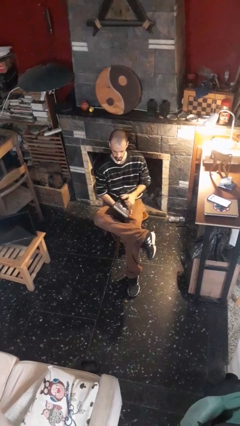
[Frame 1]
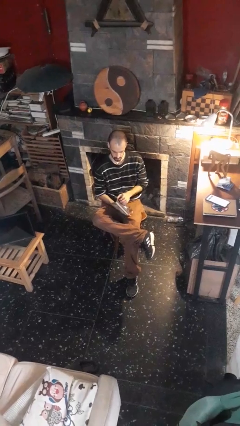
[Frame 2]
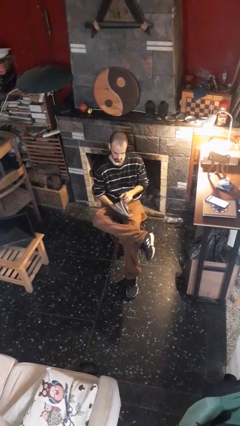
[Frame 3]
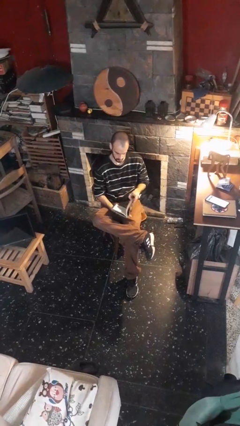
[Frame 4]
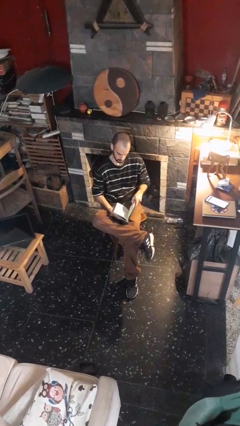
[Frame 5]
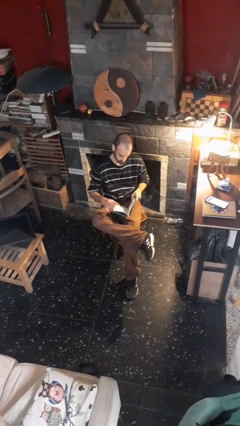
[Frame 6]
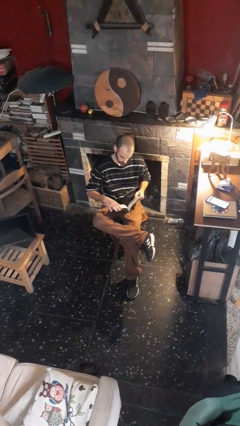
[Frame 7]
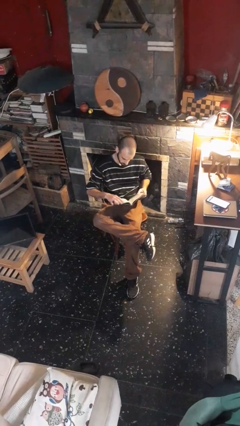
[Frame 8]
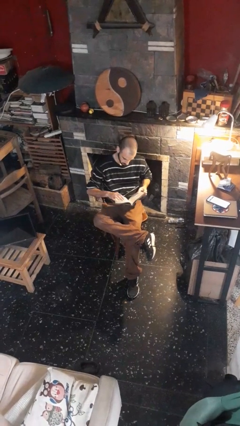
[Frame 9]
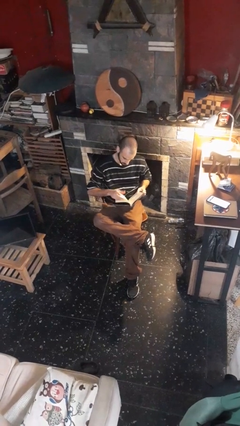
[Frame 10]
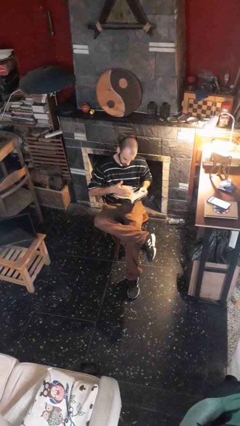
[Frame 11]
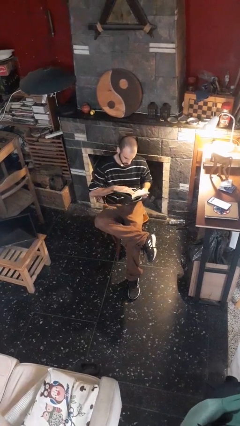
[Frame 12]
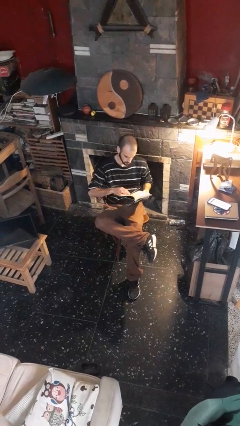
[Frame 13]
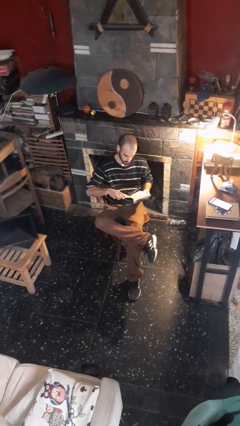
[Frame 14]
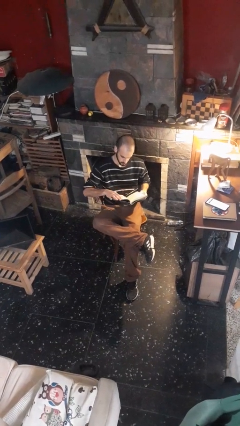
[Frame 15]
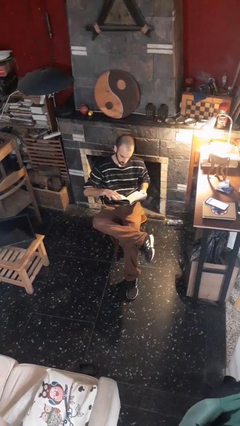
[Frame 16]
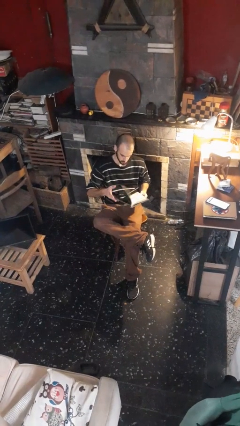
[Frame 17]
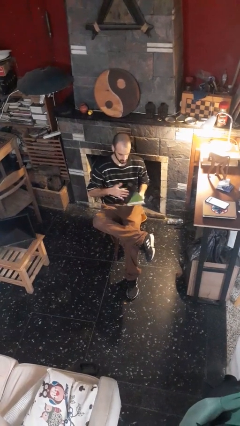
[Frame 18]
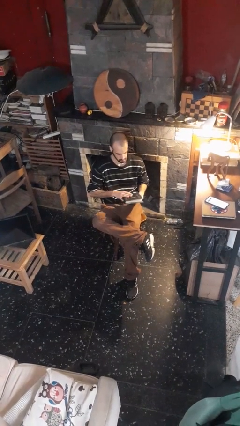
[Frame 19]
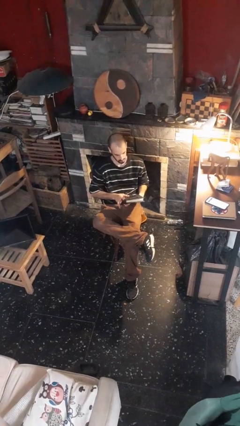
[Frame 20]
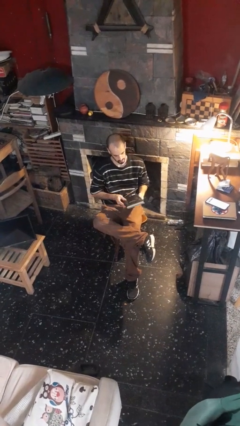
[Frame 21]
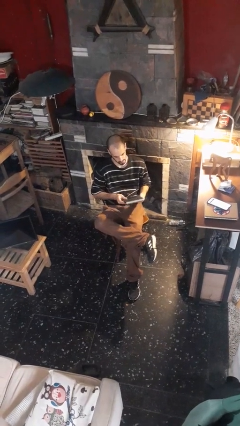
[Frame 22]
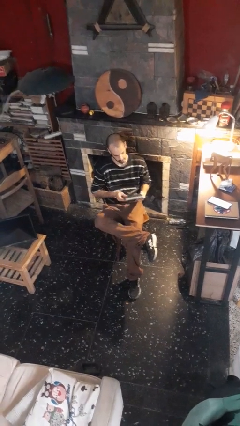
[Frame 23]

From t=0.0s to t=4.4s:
person reads book

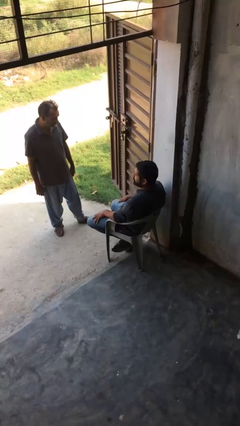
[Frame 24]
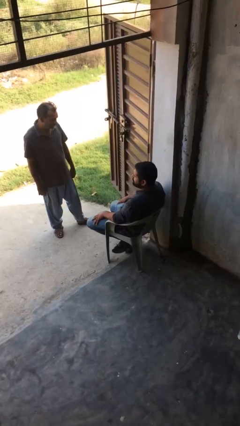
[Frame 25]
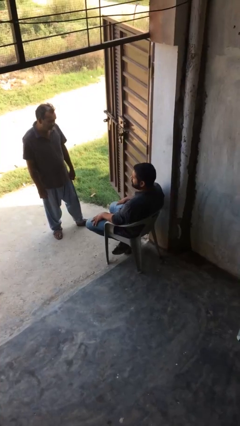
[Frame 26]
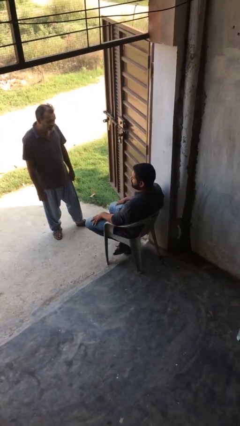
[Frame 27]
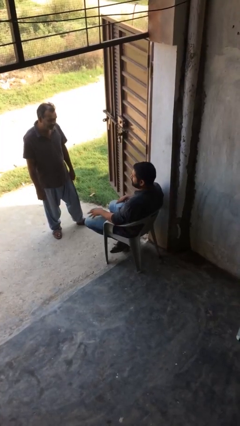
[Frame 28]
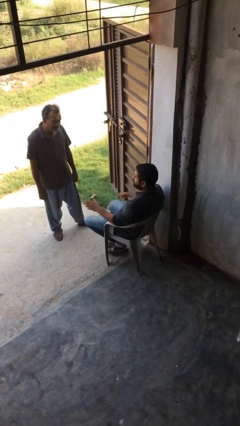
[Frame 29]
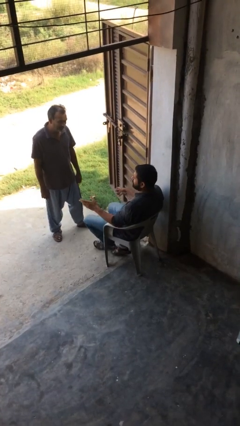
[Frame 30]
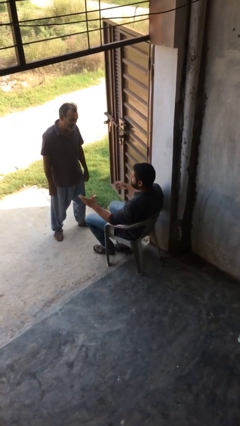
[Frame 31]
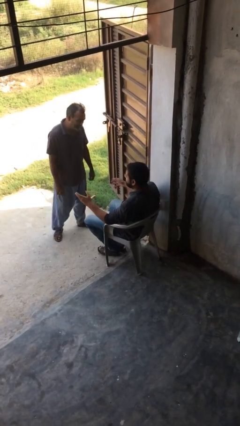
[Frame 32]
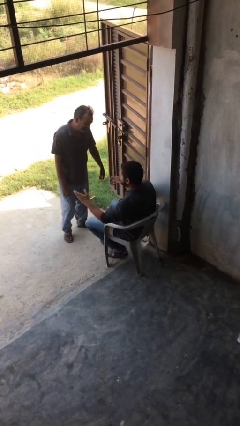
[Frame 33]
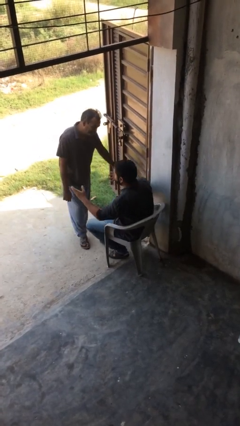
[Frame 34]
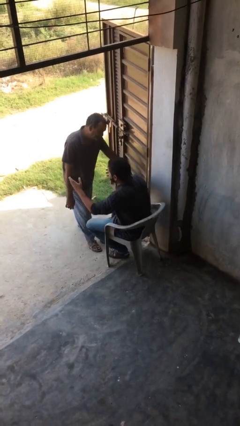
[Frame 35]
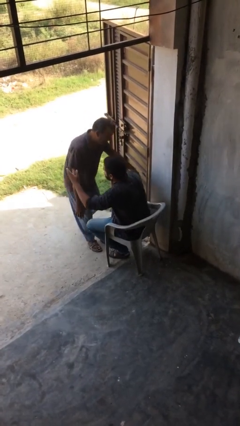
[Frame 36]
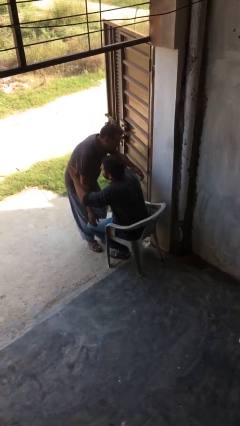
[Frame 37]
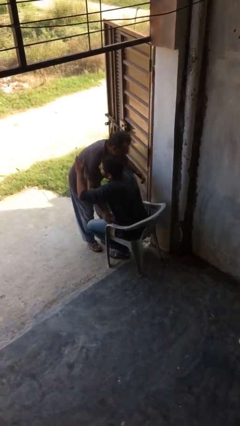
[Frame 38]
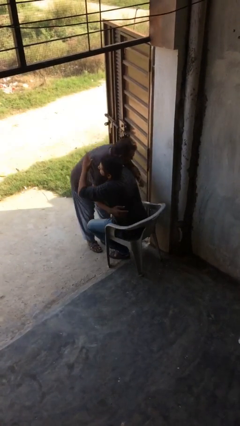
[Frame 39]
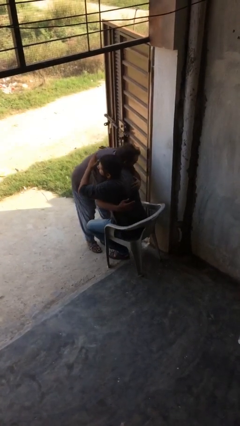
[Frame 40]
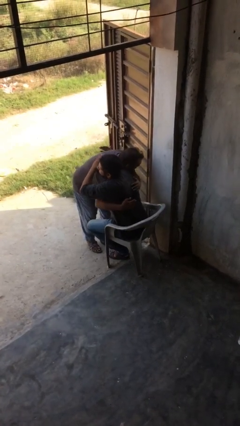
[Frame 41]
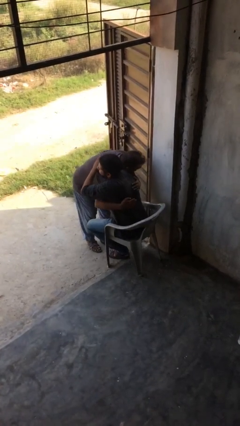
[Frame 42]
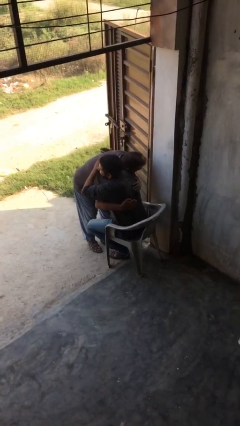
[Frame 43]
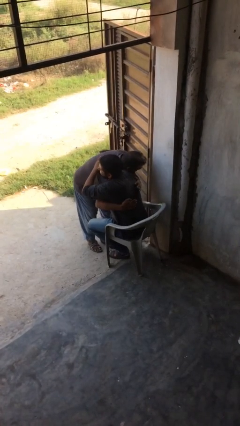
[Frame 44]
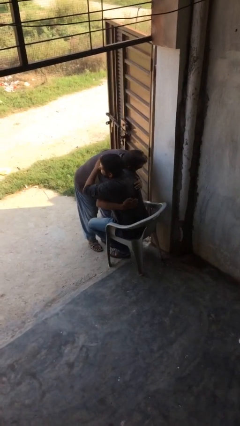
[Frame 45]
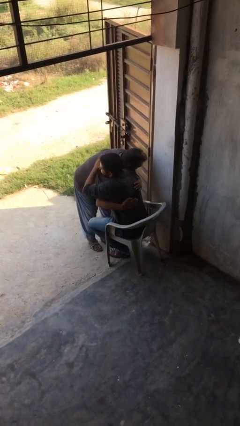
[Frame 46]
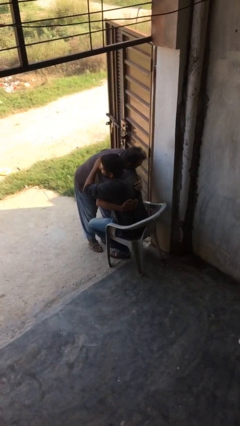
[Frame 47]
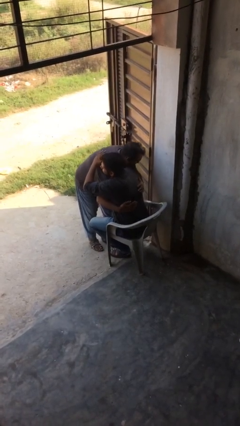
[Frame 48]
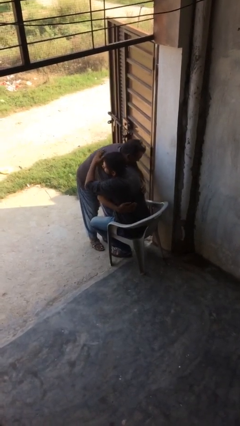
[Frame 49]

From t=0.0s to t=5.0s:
person embraces person

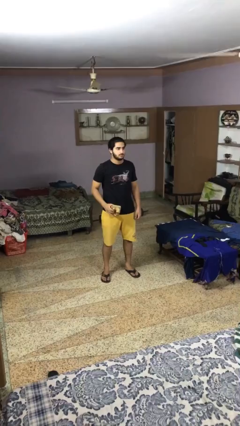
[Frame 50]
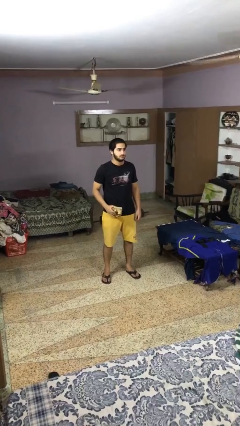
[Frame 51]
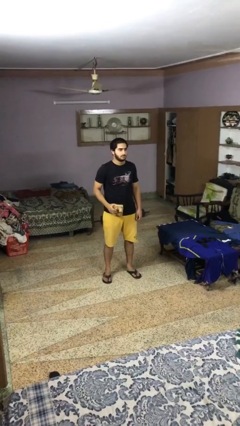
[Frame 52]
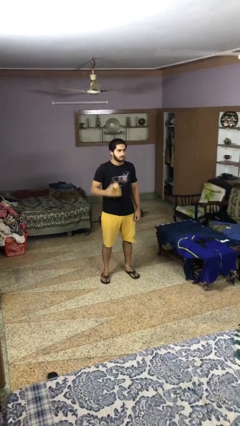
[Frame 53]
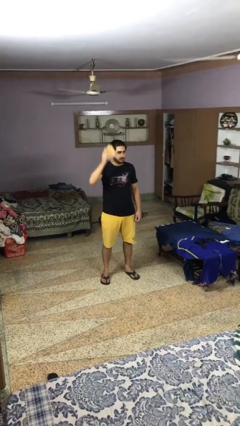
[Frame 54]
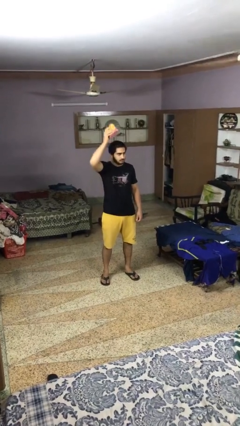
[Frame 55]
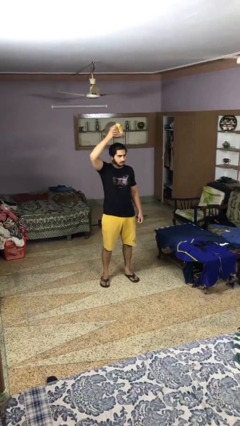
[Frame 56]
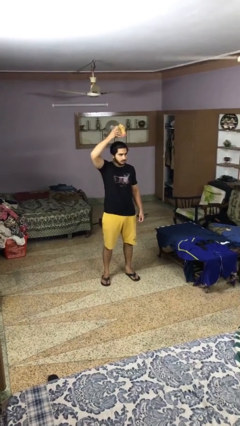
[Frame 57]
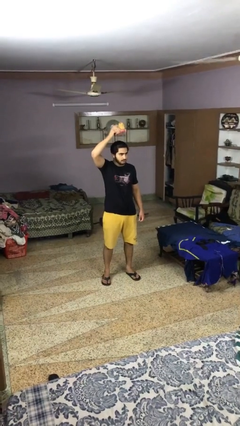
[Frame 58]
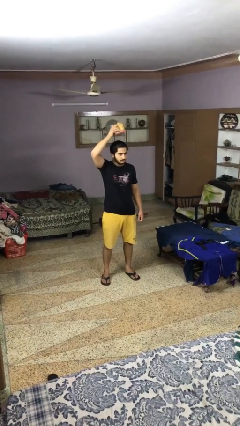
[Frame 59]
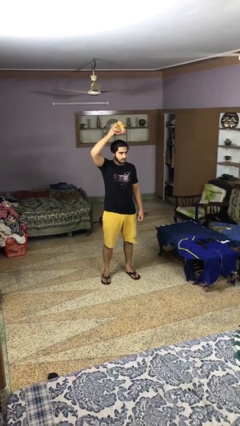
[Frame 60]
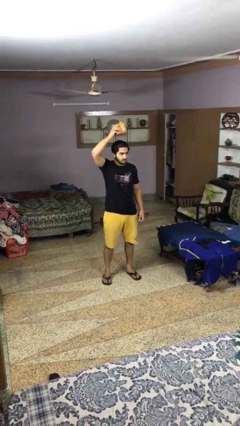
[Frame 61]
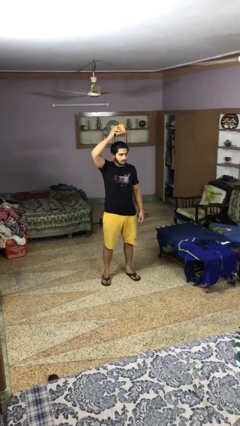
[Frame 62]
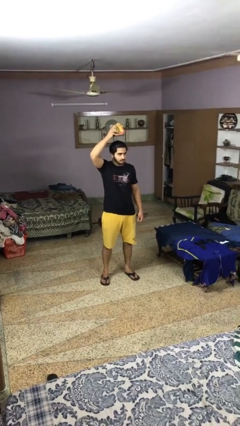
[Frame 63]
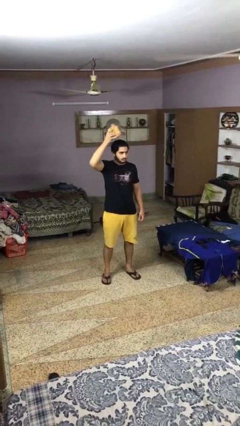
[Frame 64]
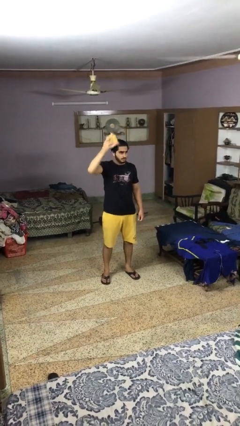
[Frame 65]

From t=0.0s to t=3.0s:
person holds object above head

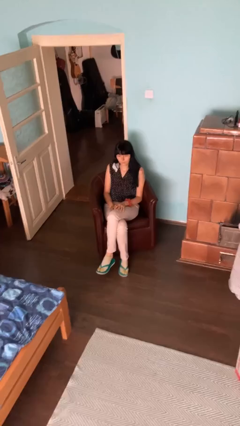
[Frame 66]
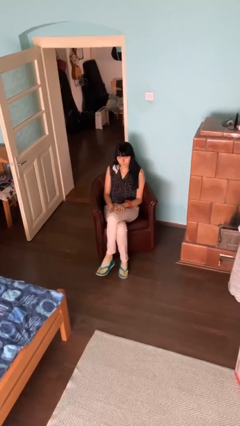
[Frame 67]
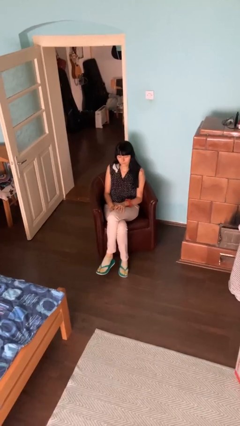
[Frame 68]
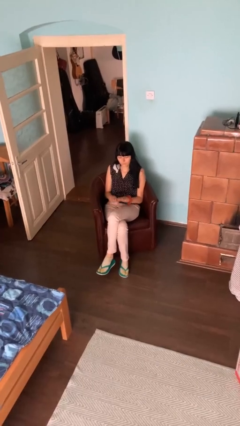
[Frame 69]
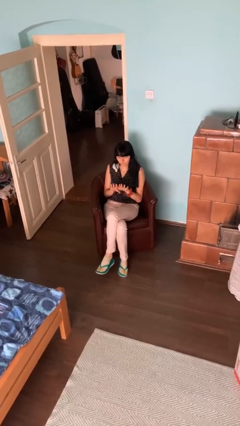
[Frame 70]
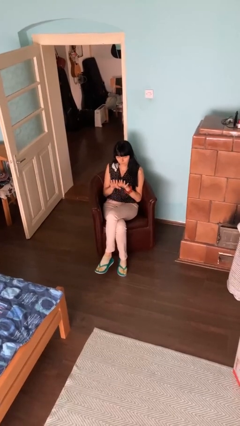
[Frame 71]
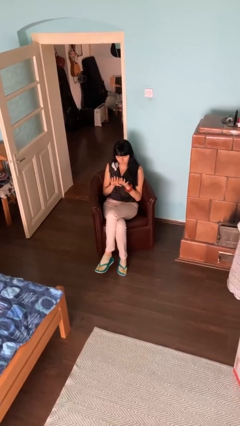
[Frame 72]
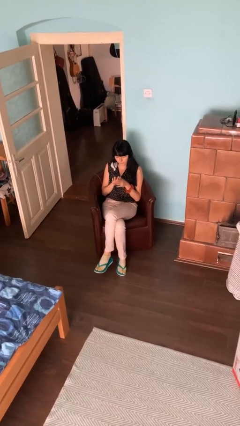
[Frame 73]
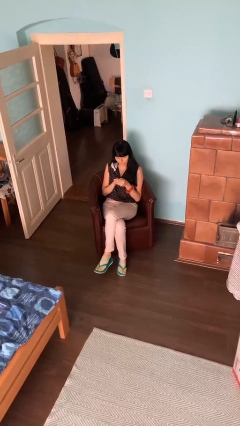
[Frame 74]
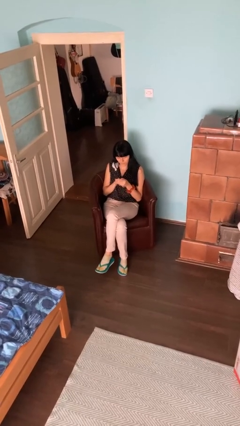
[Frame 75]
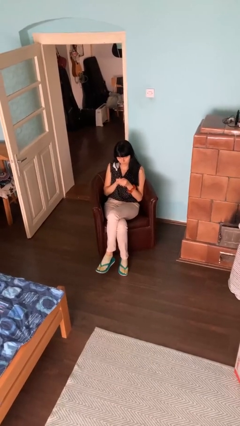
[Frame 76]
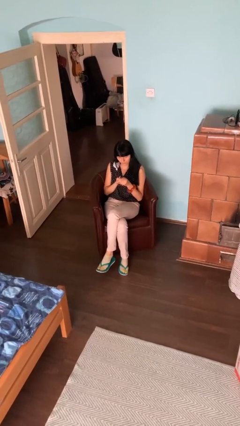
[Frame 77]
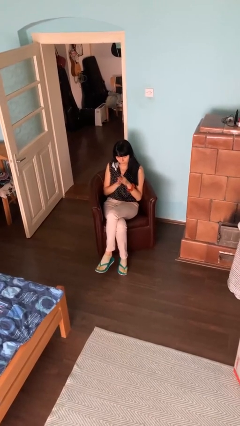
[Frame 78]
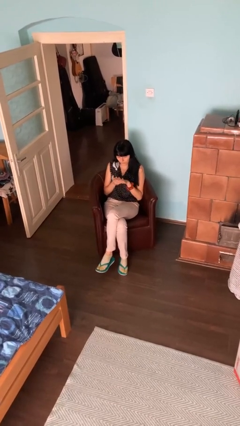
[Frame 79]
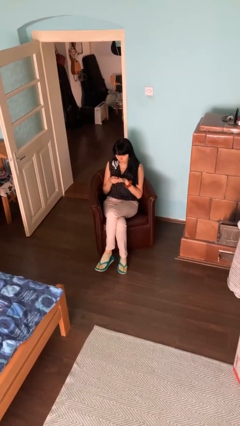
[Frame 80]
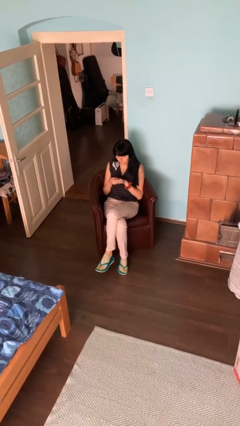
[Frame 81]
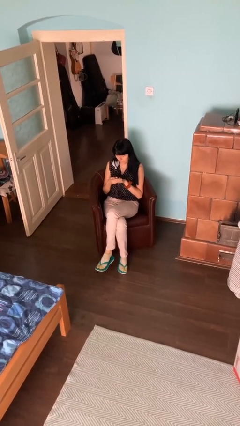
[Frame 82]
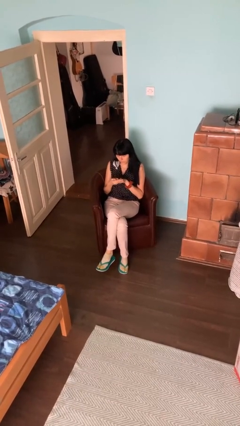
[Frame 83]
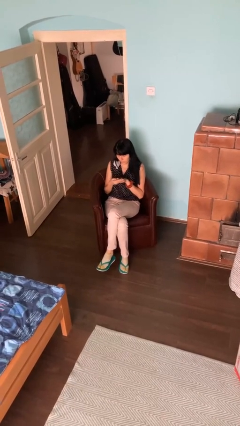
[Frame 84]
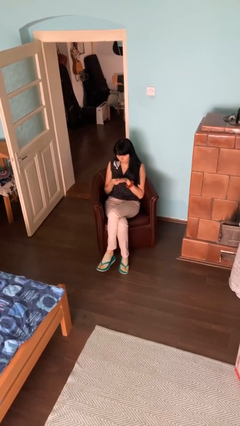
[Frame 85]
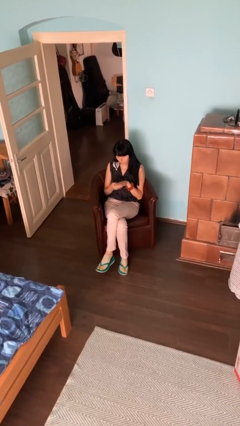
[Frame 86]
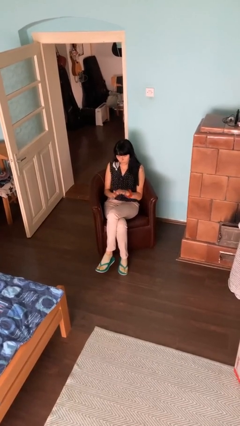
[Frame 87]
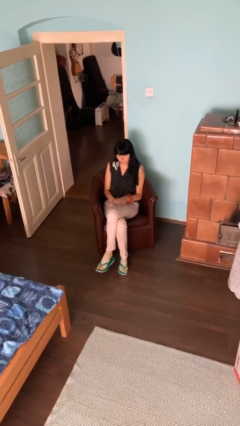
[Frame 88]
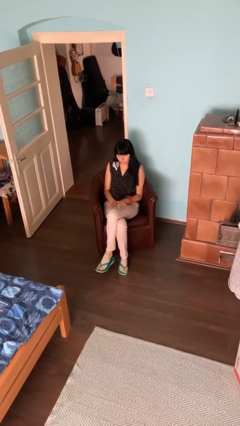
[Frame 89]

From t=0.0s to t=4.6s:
person looks at hands in lap

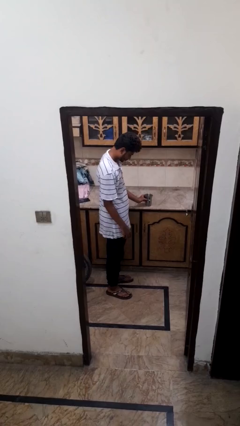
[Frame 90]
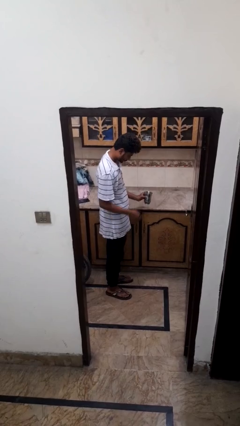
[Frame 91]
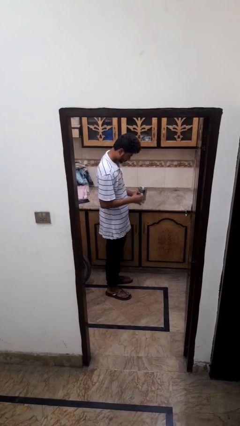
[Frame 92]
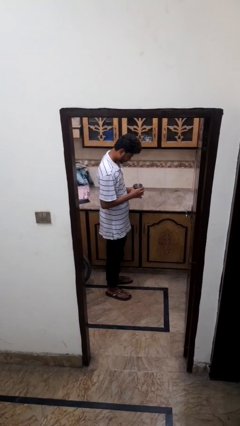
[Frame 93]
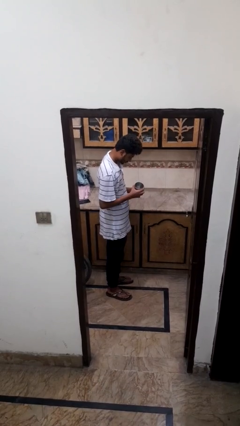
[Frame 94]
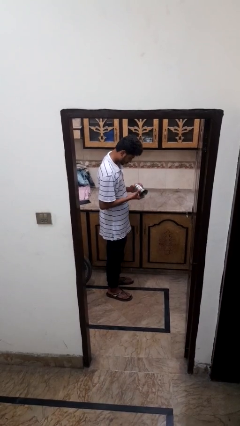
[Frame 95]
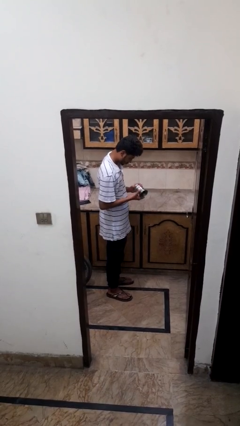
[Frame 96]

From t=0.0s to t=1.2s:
person picks up object from countertop
